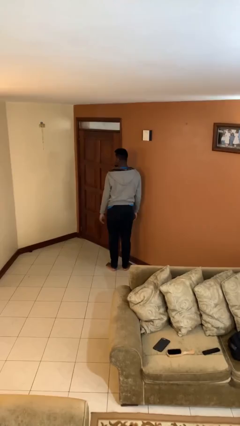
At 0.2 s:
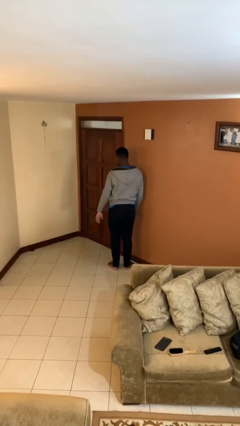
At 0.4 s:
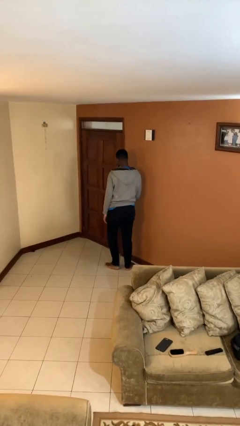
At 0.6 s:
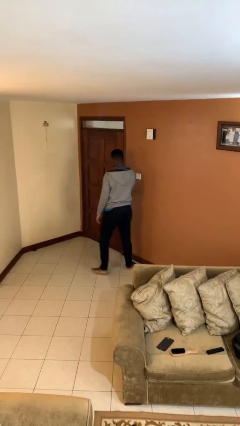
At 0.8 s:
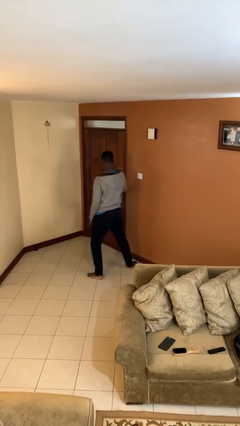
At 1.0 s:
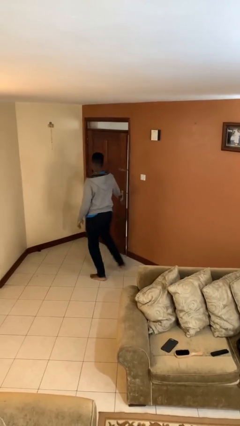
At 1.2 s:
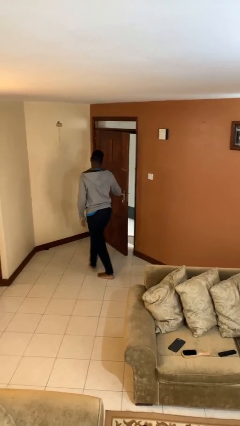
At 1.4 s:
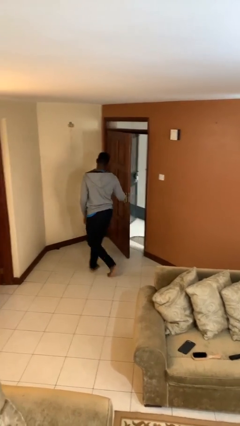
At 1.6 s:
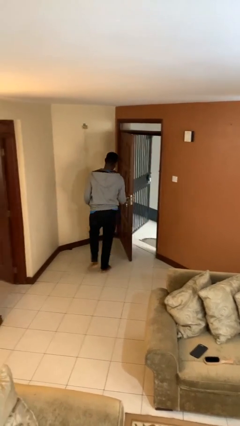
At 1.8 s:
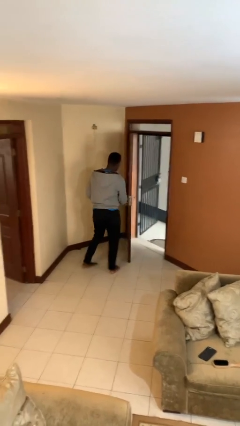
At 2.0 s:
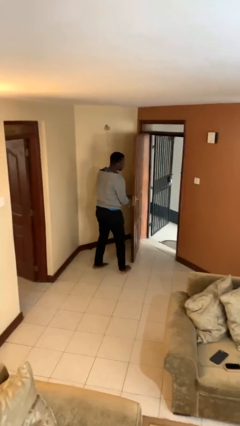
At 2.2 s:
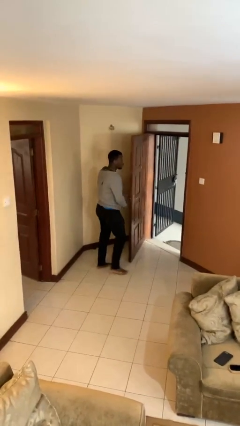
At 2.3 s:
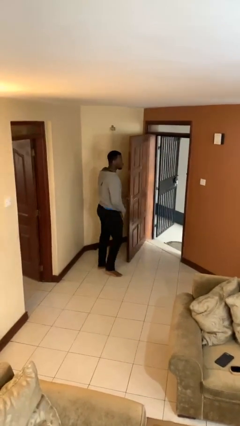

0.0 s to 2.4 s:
person closes facility door

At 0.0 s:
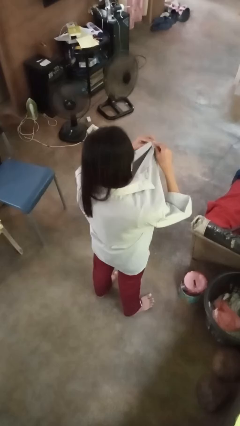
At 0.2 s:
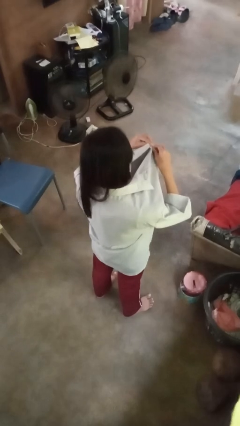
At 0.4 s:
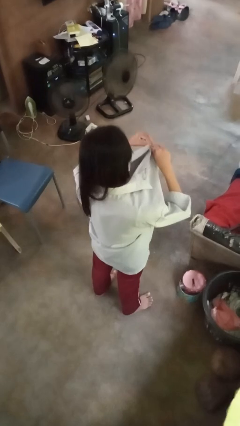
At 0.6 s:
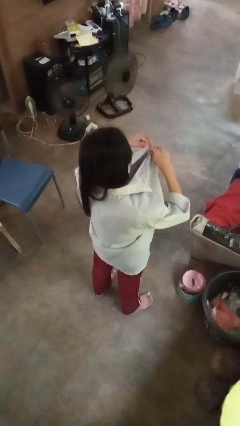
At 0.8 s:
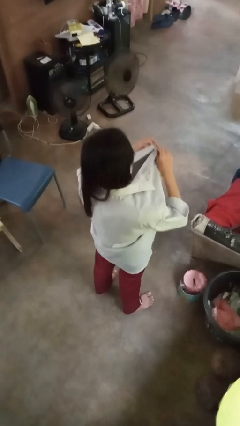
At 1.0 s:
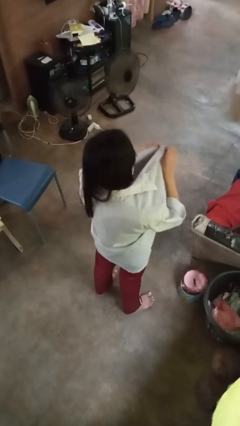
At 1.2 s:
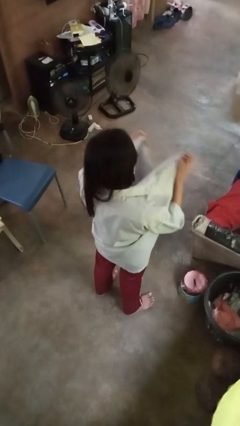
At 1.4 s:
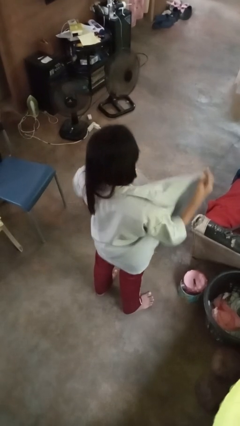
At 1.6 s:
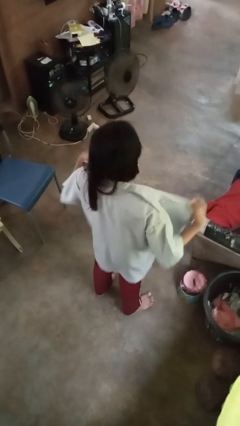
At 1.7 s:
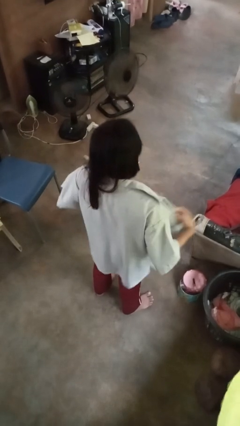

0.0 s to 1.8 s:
person unbuttons shirt

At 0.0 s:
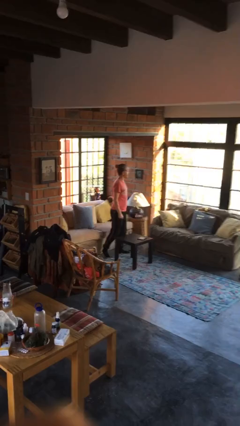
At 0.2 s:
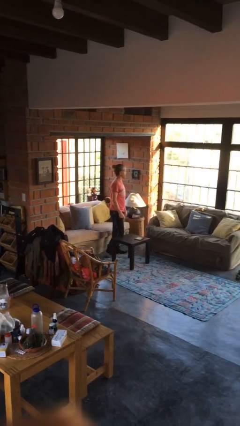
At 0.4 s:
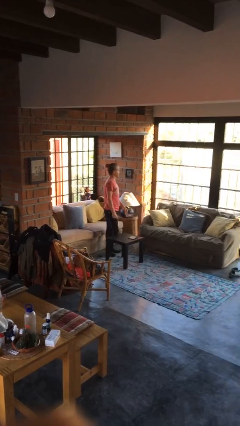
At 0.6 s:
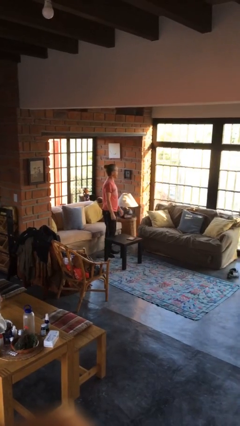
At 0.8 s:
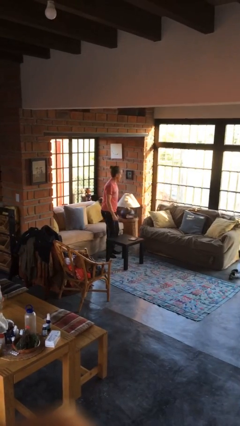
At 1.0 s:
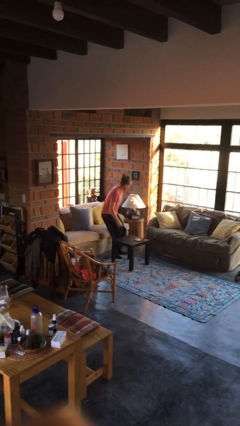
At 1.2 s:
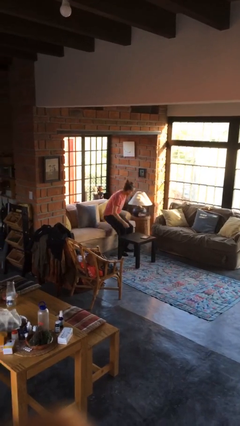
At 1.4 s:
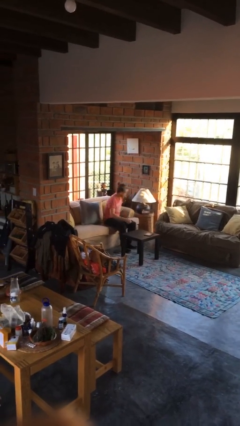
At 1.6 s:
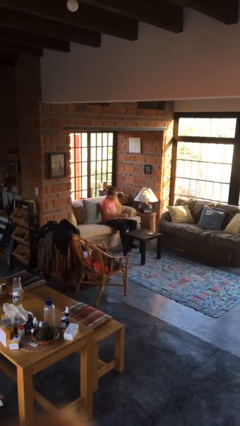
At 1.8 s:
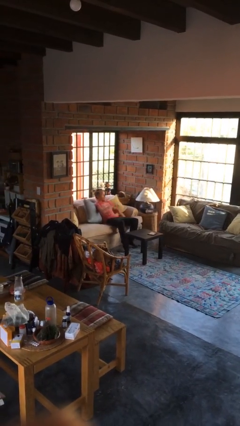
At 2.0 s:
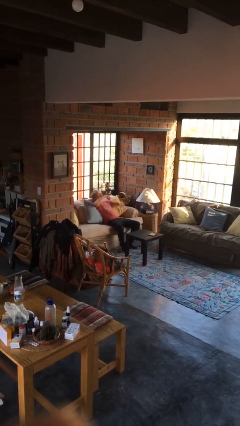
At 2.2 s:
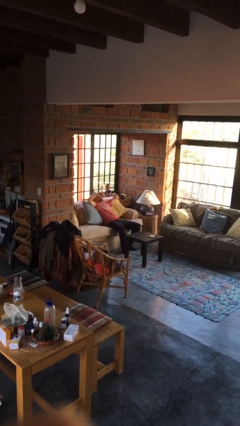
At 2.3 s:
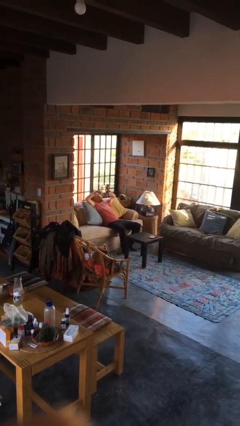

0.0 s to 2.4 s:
person lies down on couch

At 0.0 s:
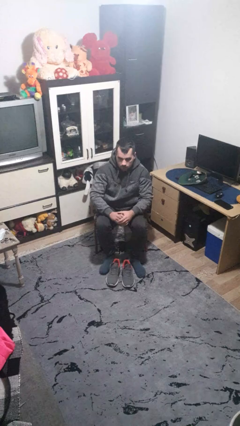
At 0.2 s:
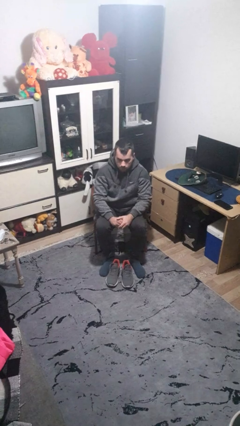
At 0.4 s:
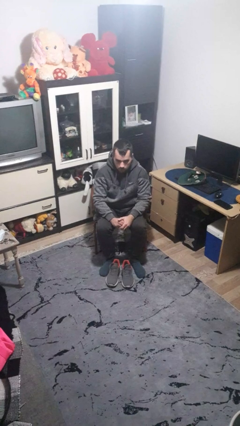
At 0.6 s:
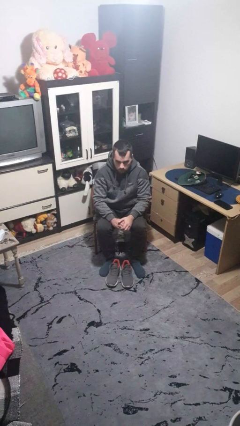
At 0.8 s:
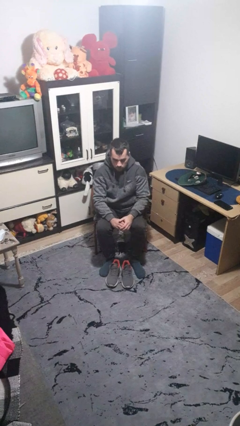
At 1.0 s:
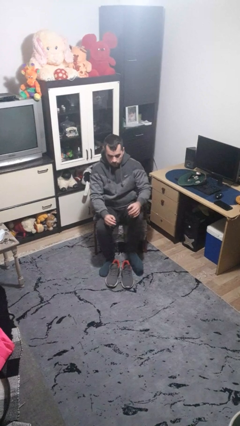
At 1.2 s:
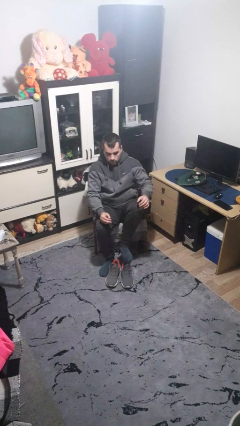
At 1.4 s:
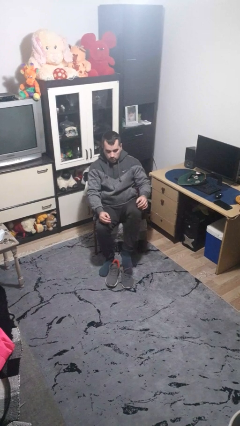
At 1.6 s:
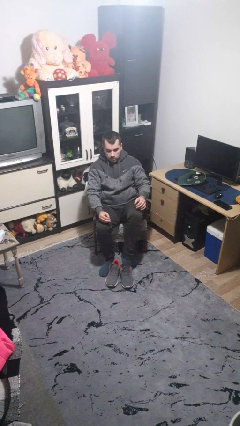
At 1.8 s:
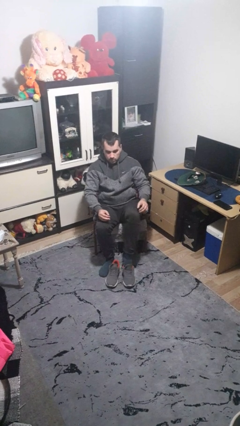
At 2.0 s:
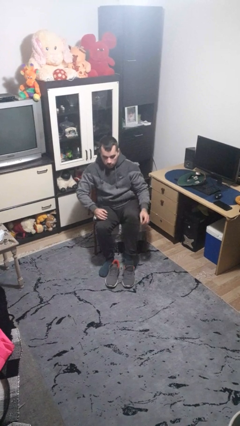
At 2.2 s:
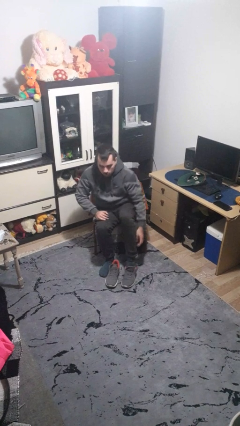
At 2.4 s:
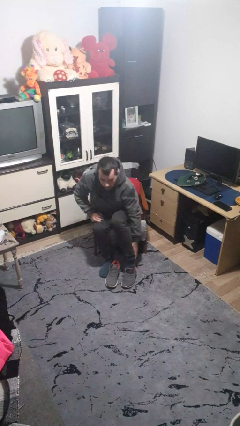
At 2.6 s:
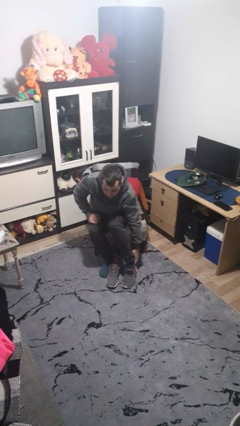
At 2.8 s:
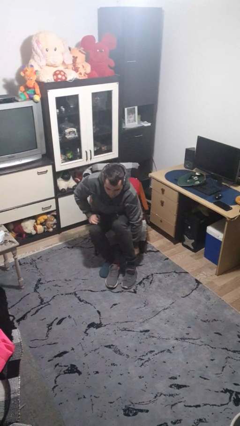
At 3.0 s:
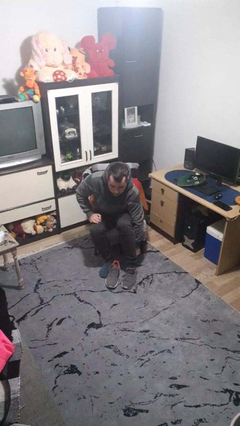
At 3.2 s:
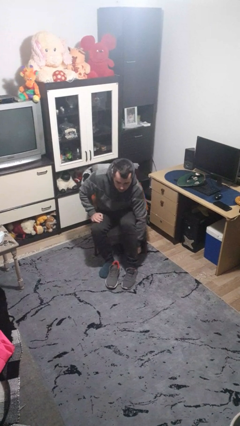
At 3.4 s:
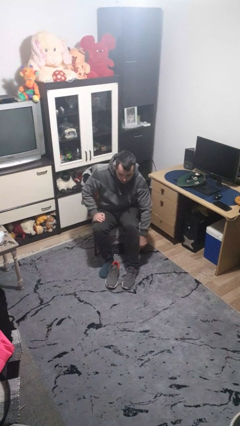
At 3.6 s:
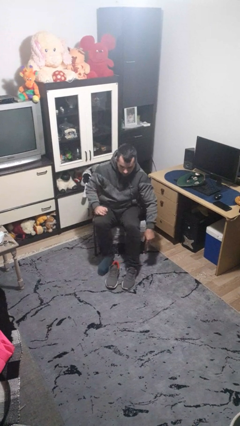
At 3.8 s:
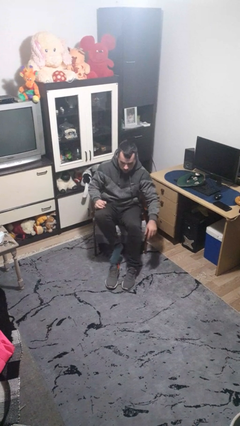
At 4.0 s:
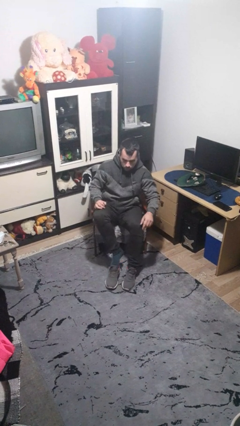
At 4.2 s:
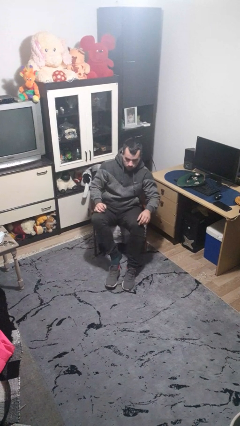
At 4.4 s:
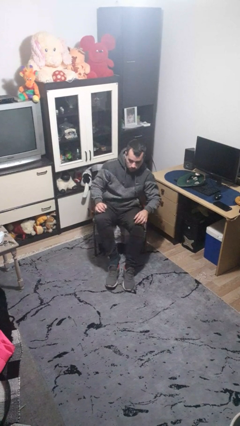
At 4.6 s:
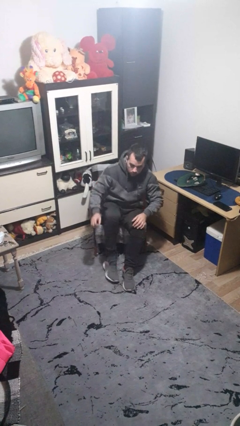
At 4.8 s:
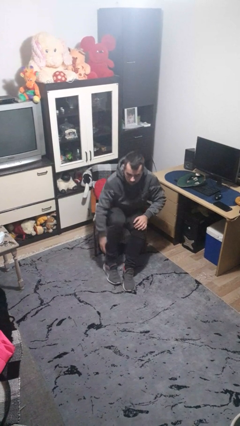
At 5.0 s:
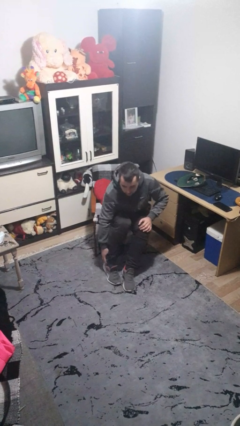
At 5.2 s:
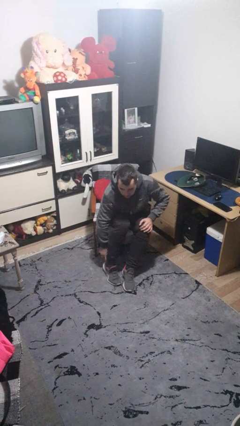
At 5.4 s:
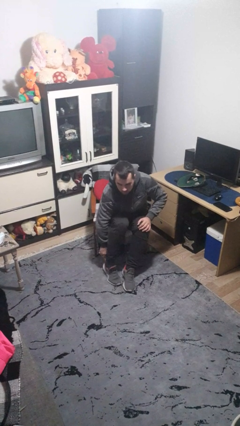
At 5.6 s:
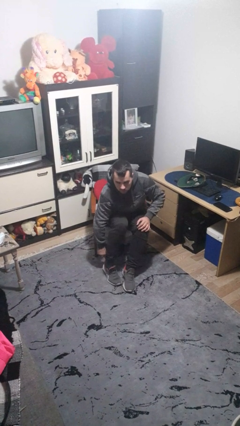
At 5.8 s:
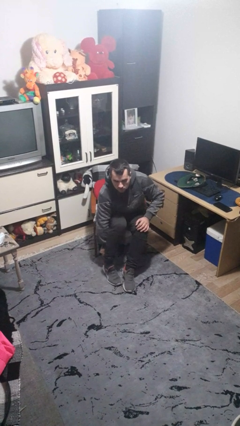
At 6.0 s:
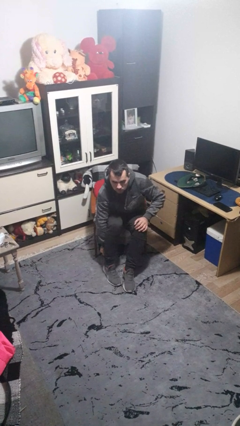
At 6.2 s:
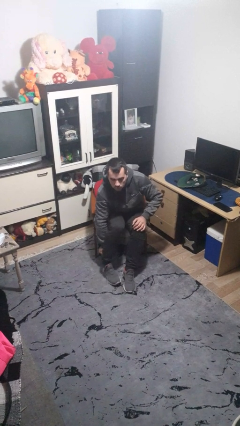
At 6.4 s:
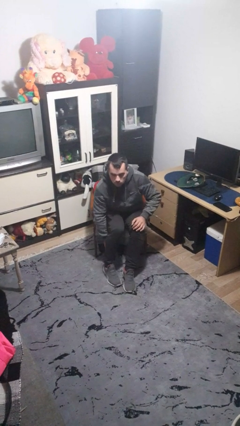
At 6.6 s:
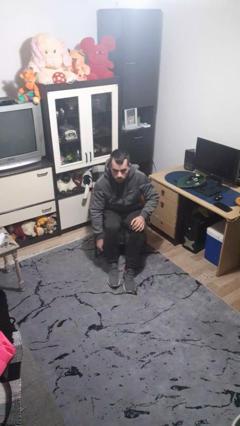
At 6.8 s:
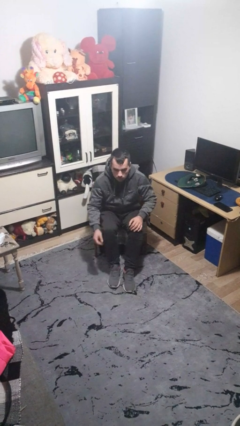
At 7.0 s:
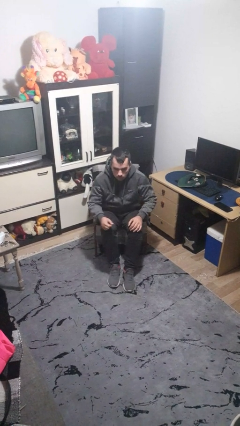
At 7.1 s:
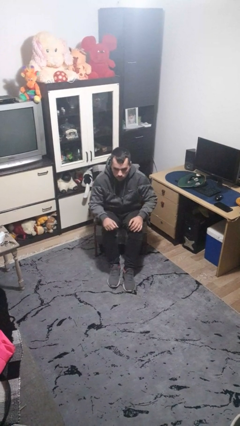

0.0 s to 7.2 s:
person puts on shoes

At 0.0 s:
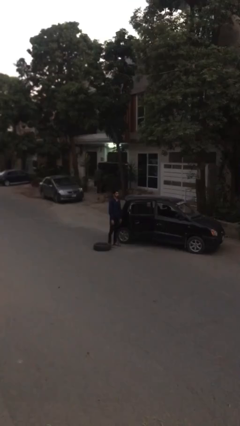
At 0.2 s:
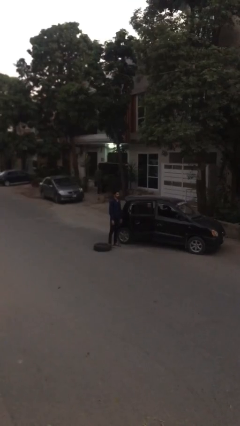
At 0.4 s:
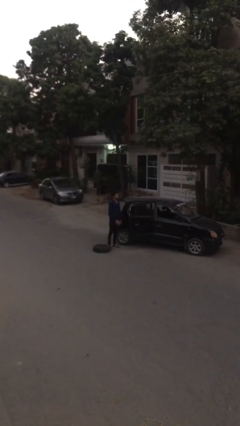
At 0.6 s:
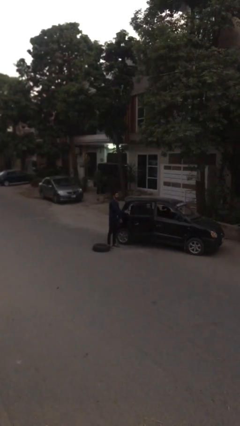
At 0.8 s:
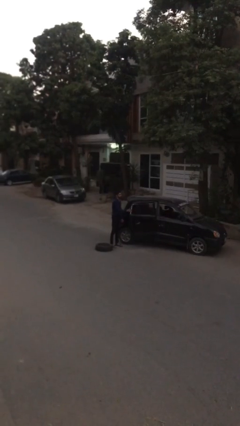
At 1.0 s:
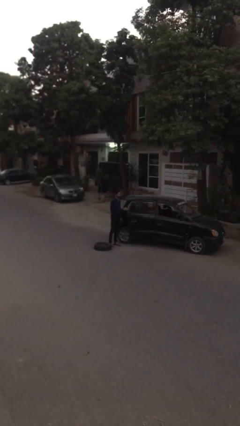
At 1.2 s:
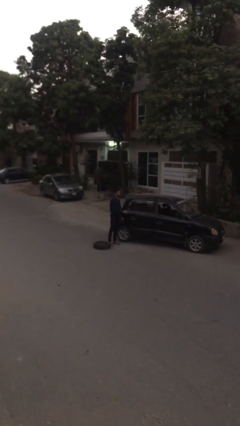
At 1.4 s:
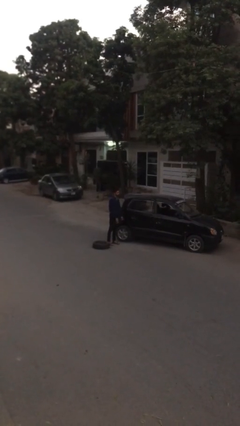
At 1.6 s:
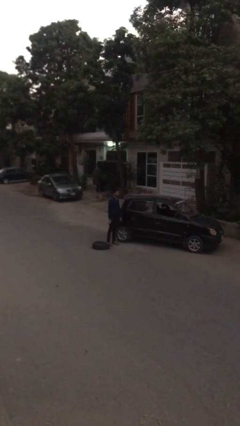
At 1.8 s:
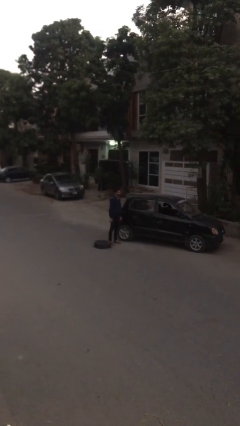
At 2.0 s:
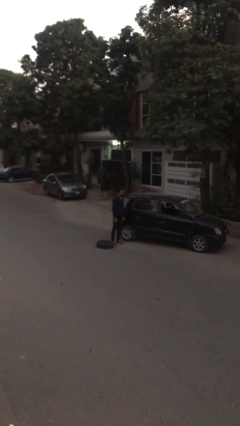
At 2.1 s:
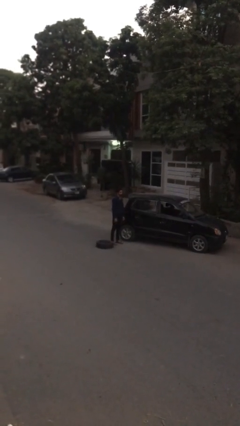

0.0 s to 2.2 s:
person closes car door

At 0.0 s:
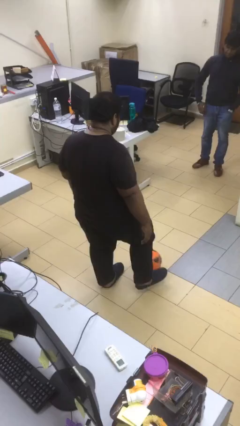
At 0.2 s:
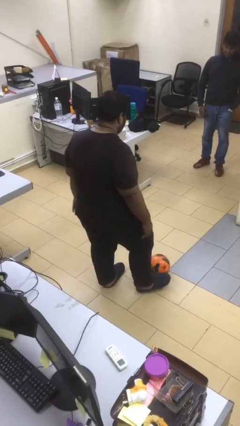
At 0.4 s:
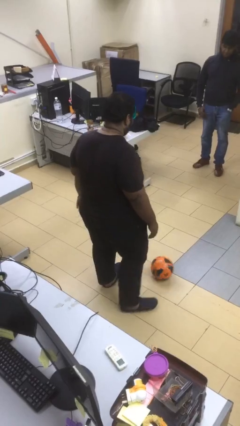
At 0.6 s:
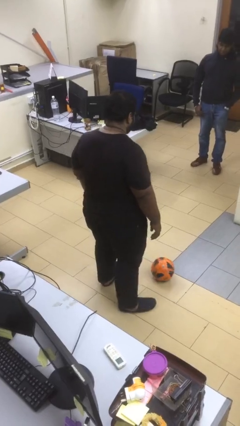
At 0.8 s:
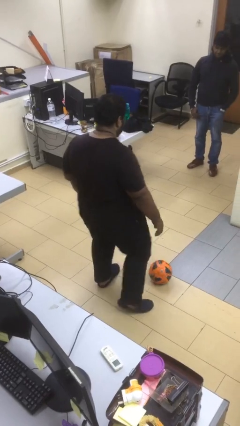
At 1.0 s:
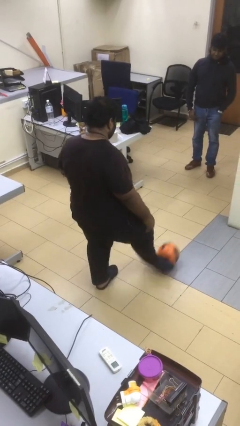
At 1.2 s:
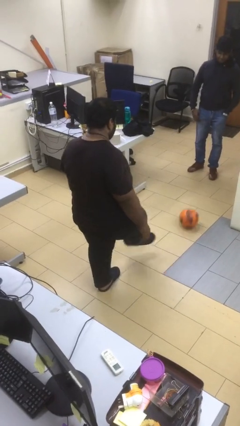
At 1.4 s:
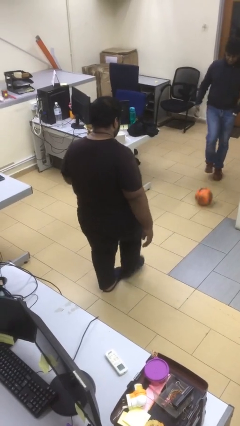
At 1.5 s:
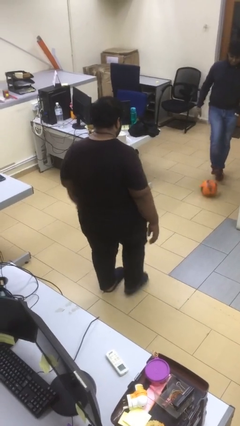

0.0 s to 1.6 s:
person kicks object to person
